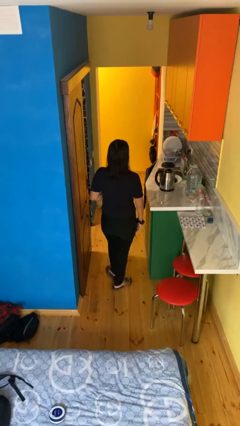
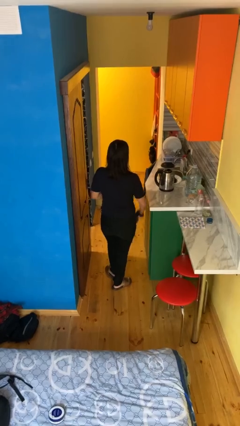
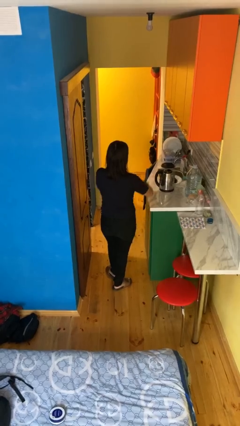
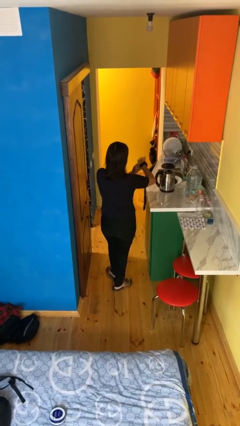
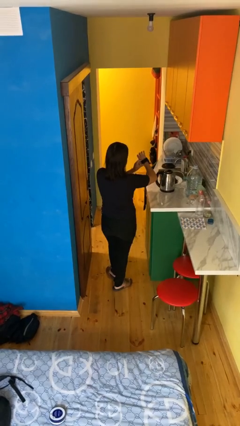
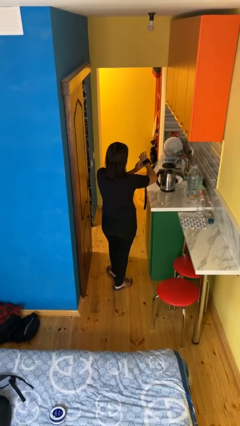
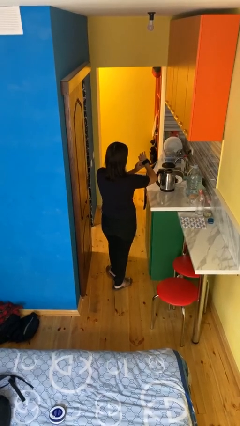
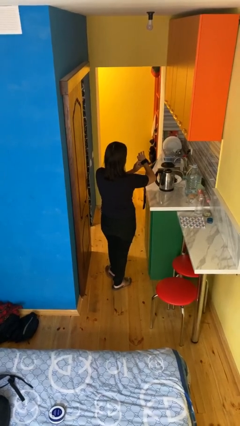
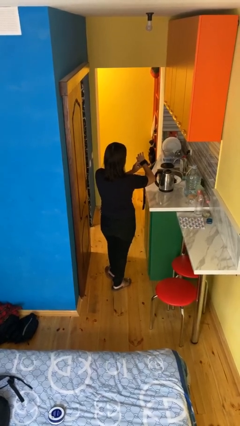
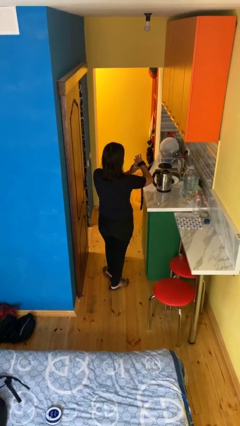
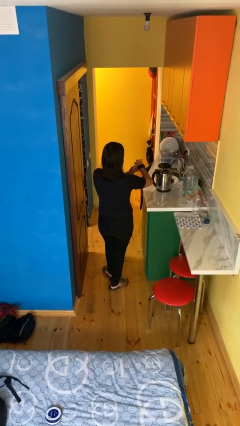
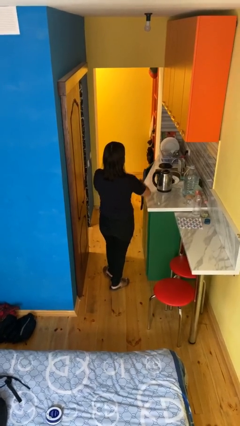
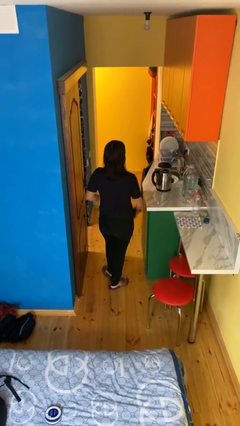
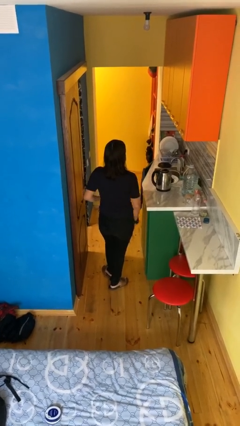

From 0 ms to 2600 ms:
person looks at wristwatch

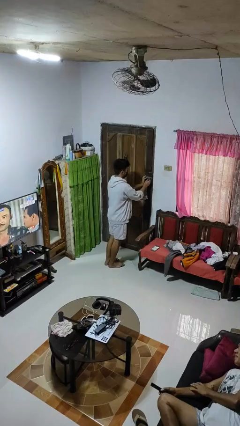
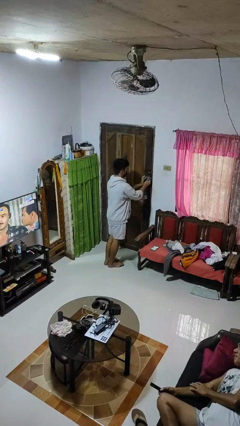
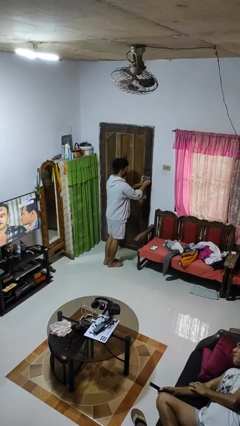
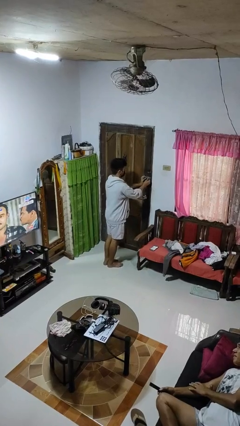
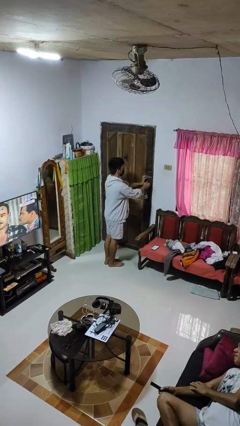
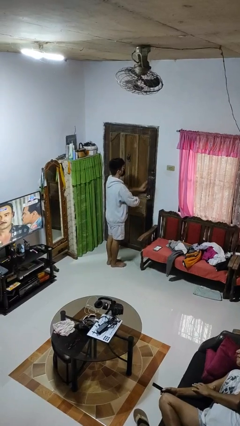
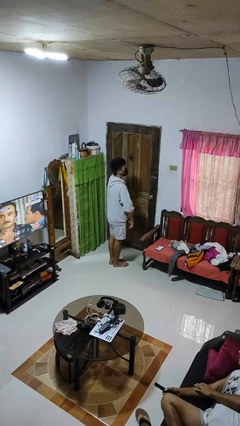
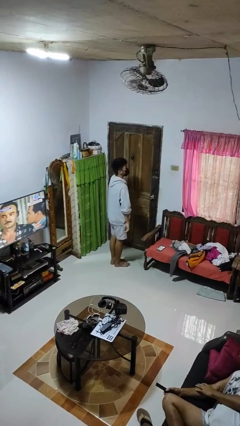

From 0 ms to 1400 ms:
person locks door with keys

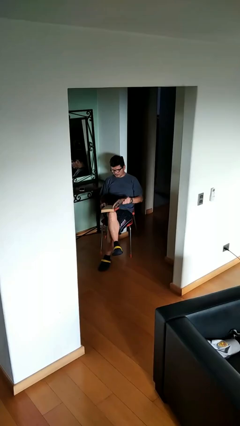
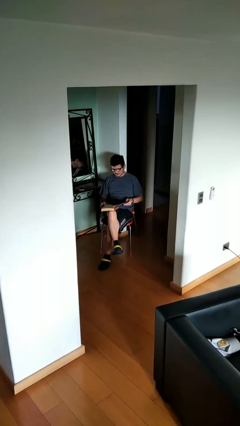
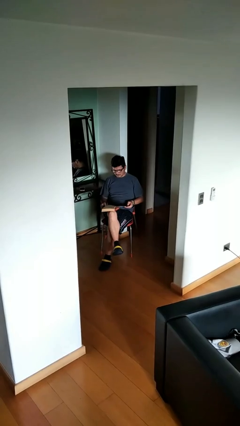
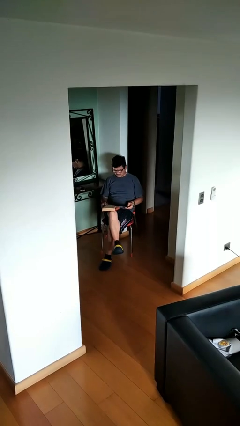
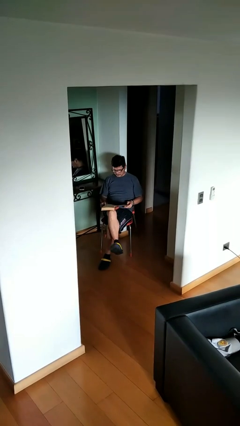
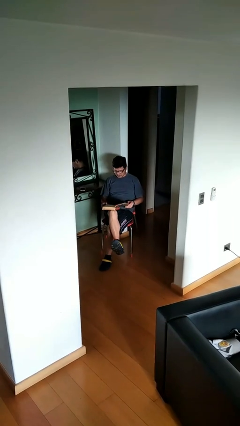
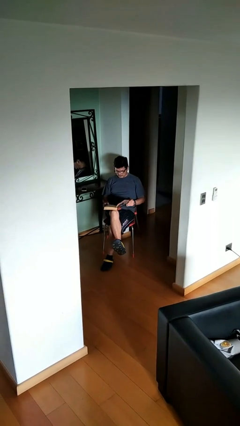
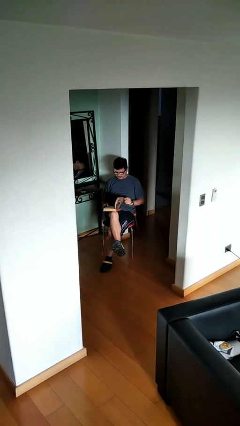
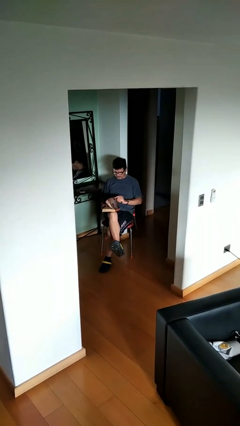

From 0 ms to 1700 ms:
person reads document

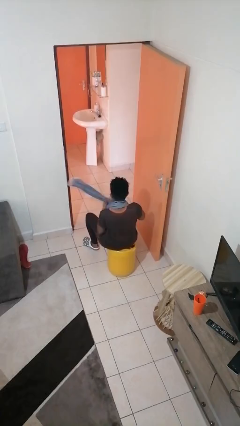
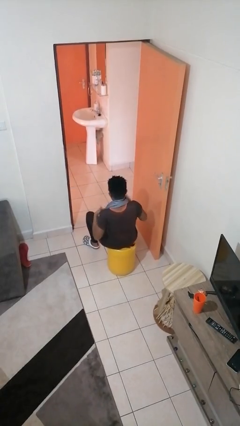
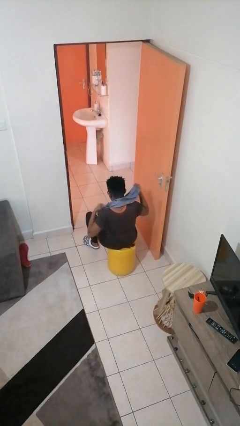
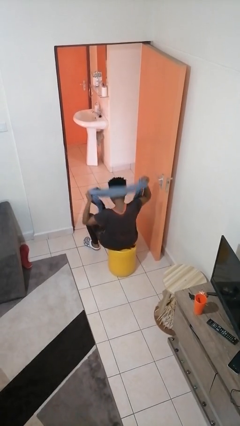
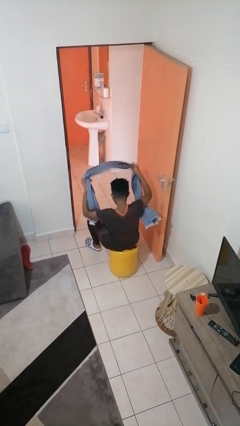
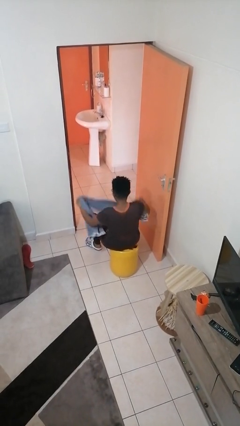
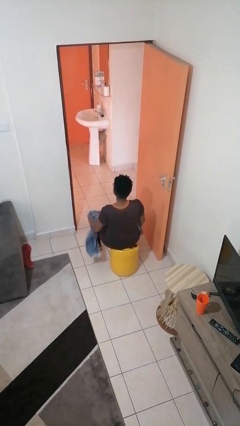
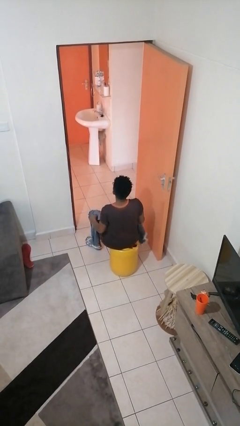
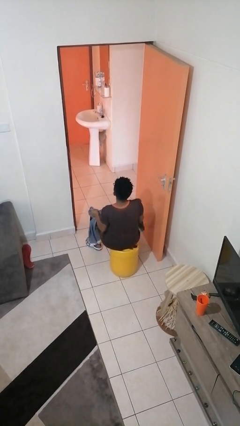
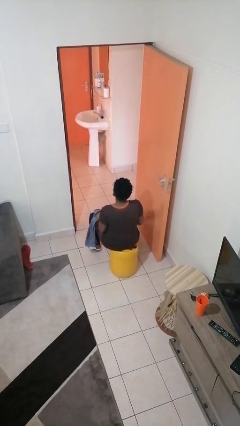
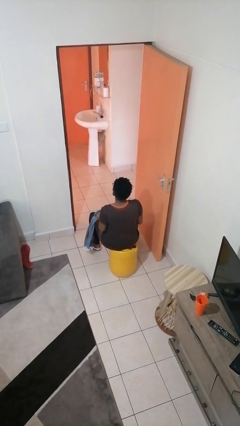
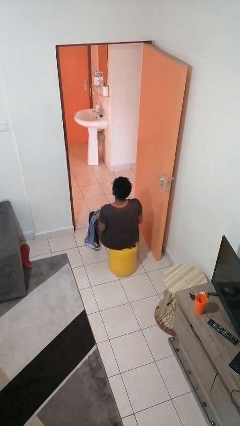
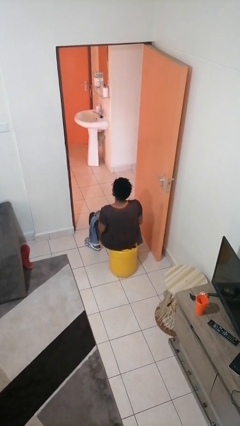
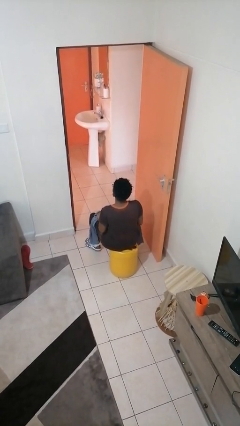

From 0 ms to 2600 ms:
person takes off scarf

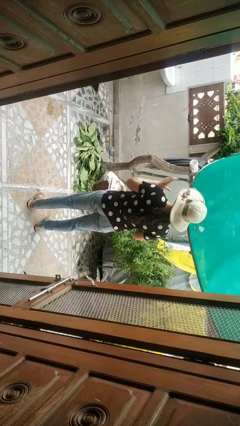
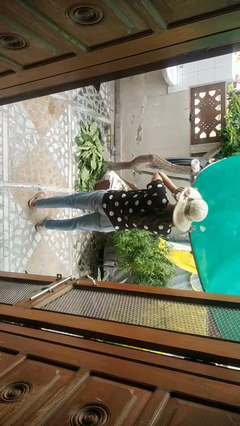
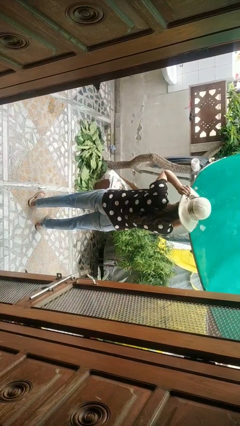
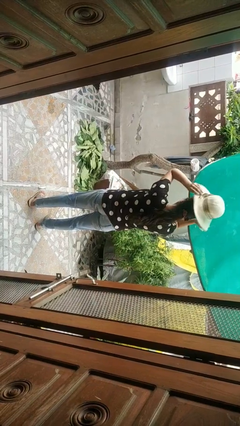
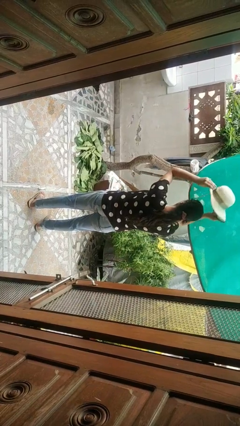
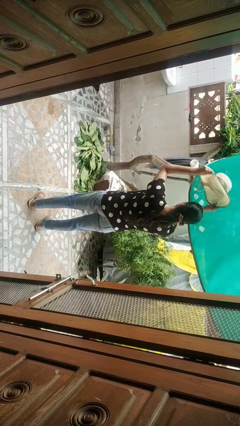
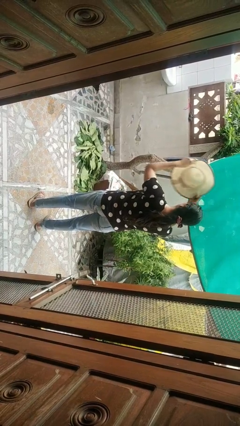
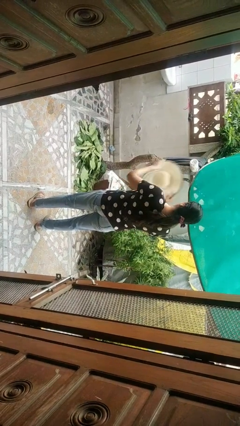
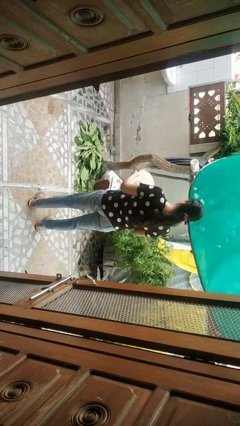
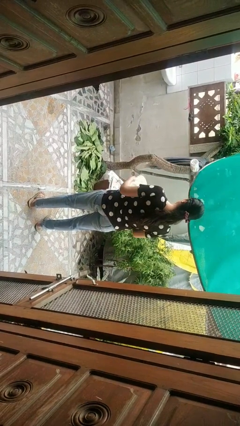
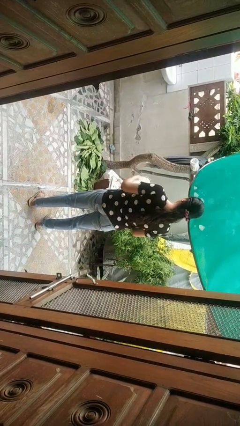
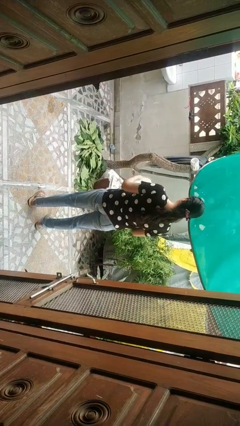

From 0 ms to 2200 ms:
person takes off hat

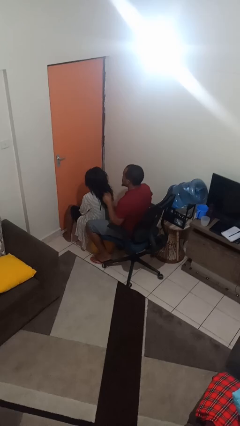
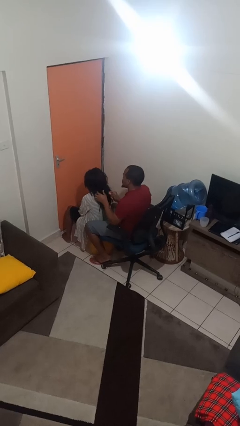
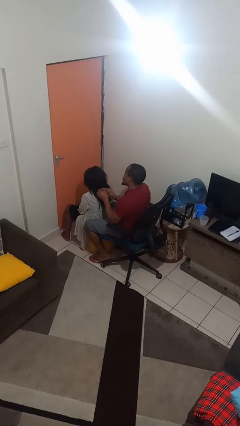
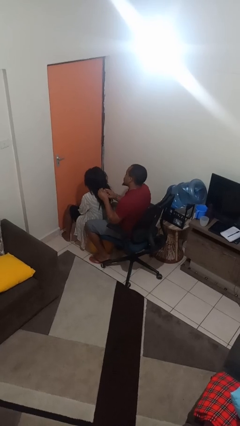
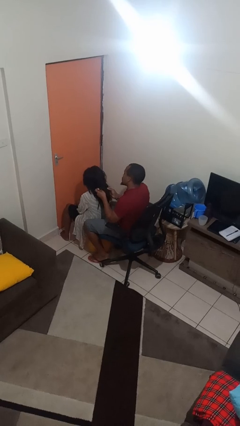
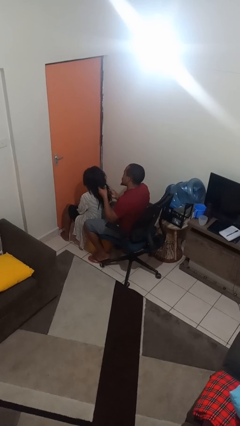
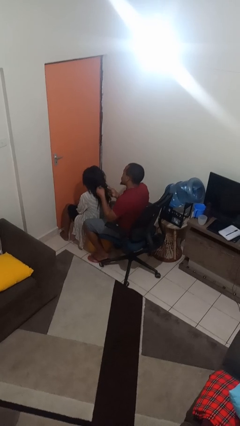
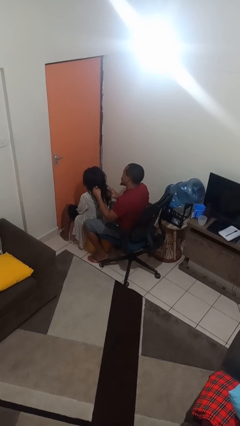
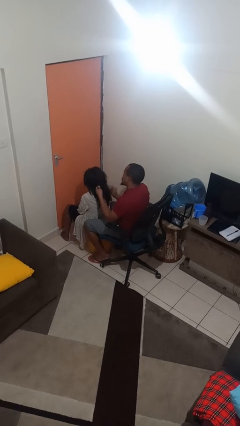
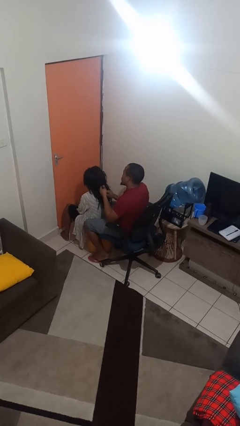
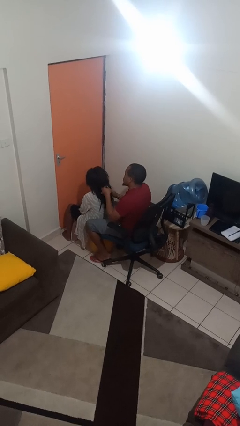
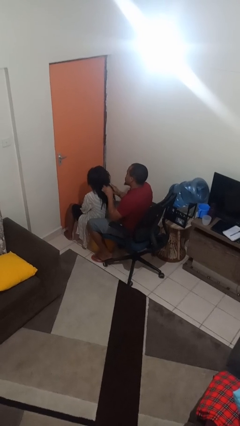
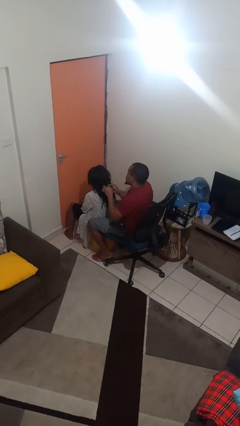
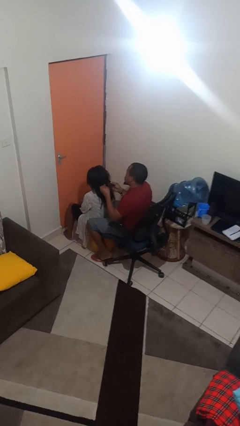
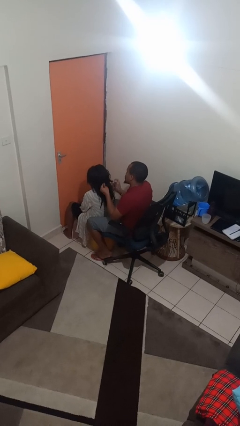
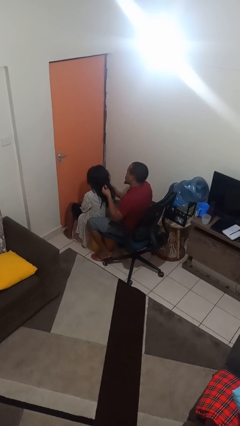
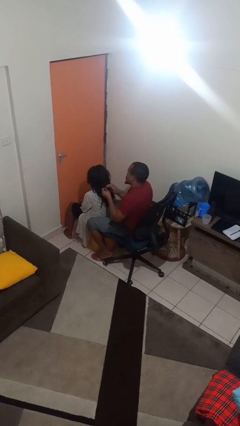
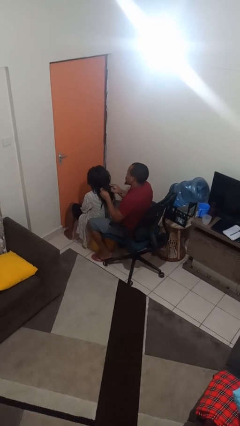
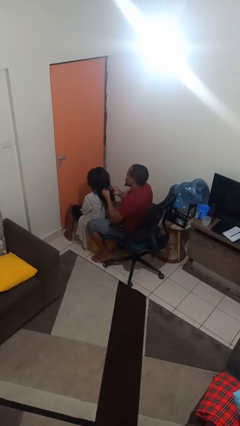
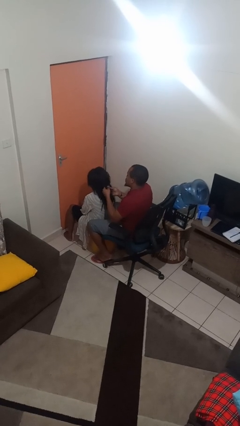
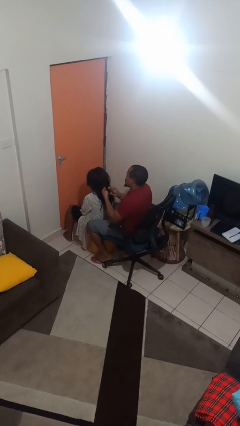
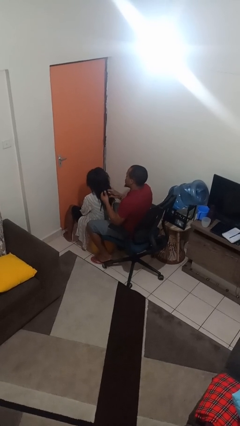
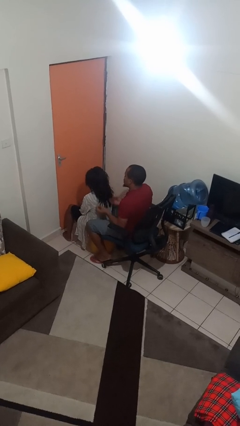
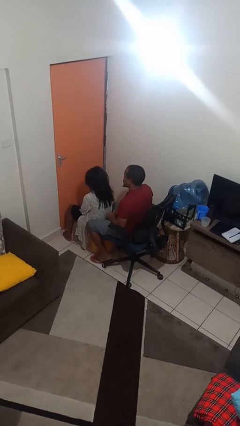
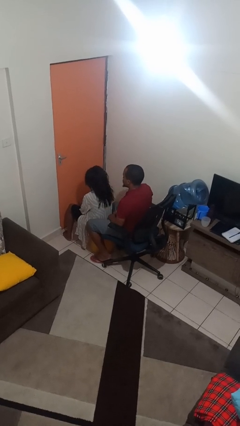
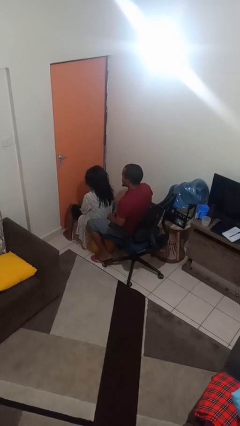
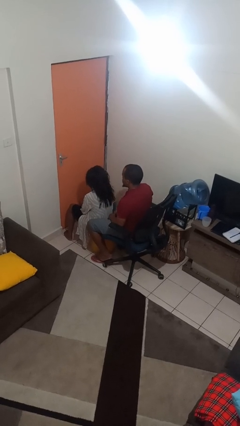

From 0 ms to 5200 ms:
person braids hair of person

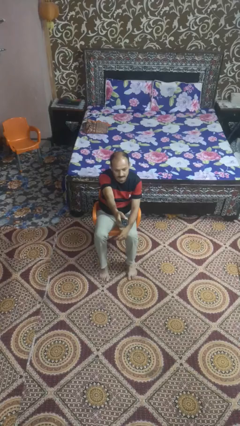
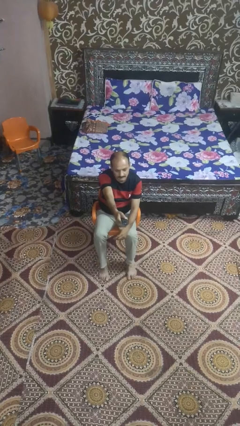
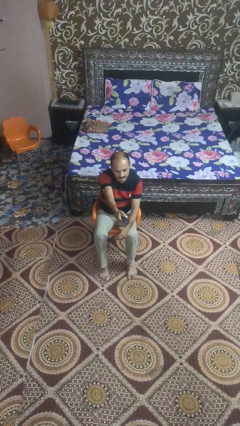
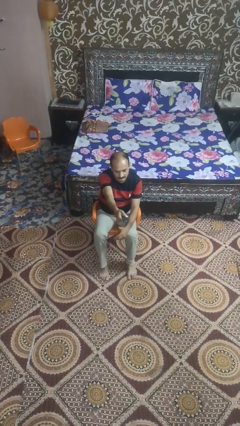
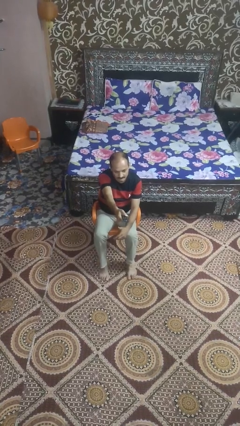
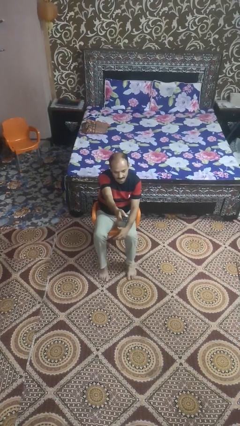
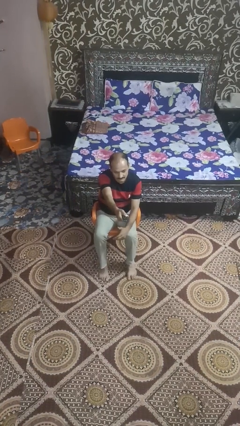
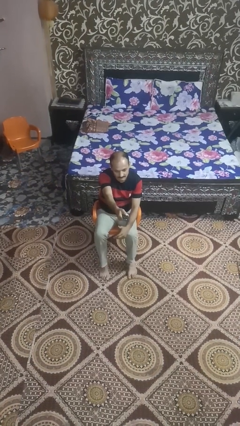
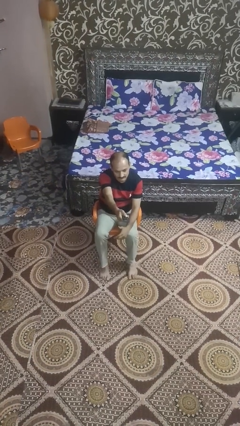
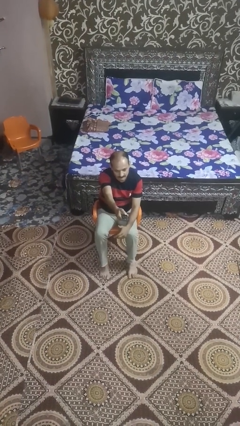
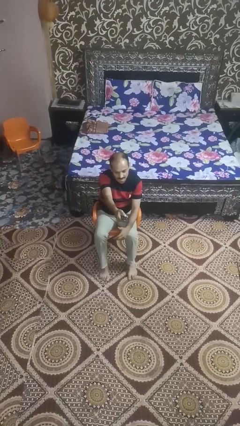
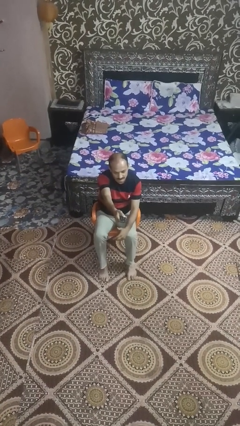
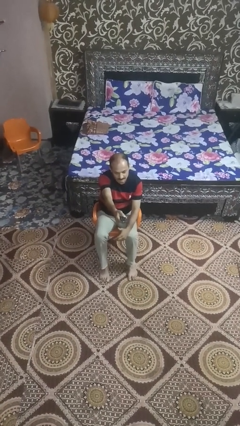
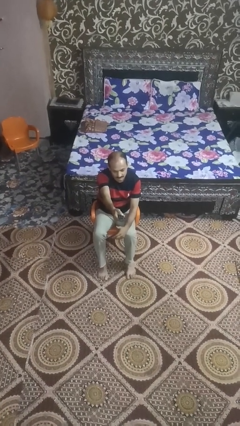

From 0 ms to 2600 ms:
person uses television remote
